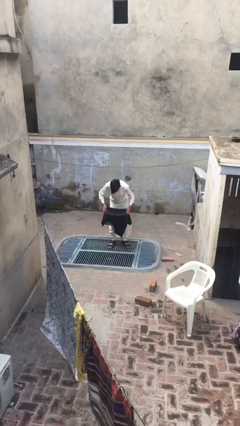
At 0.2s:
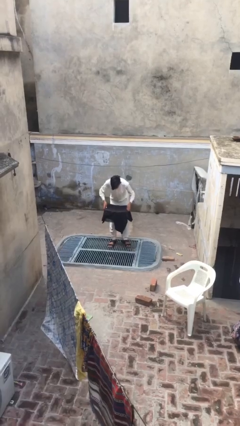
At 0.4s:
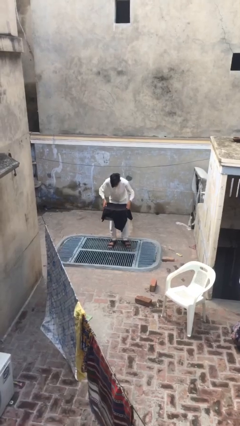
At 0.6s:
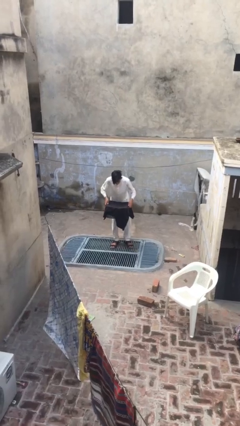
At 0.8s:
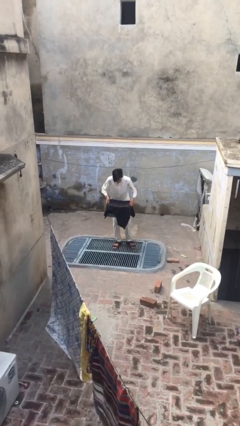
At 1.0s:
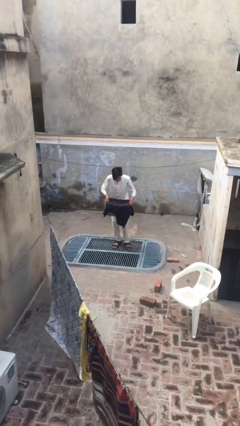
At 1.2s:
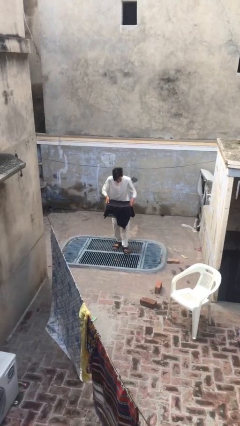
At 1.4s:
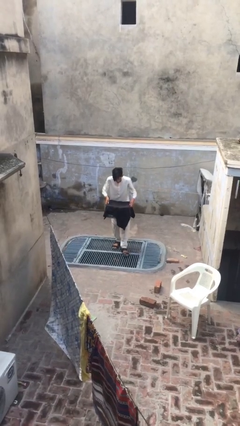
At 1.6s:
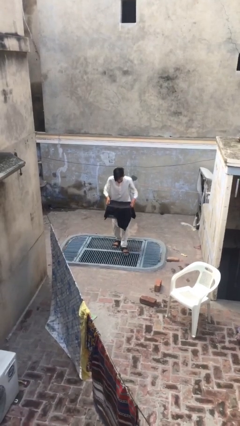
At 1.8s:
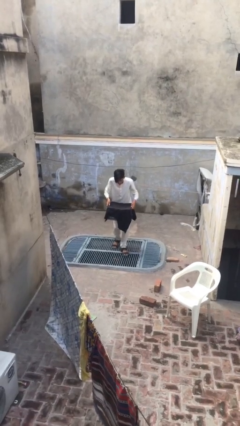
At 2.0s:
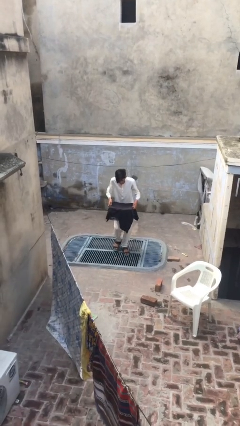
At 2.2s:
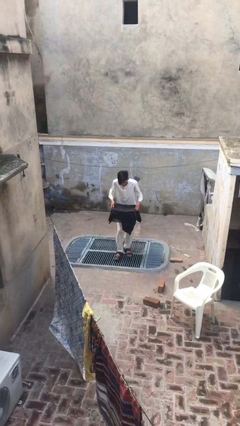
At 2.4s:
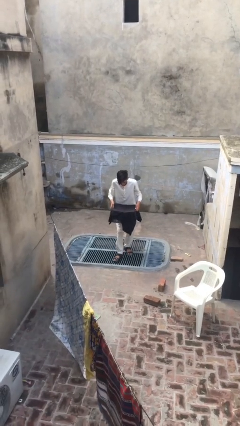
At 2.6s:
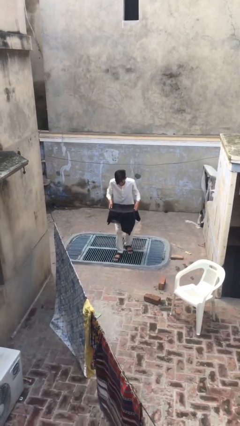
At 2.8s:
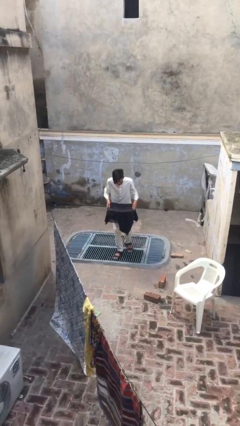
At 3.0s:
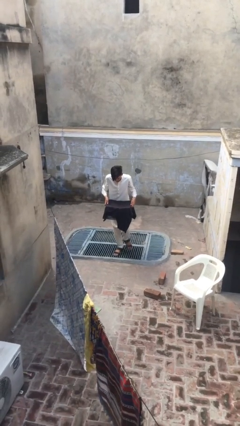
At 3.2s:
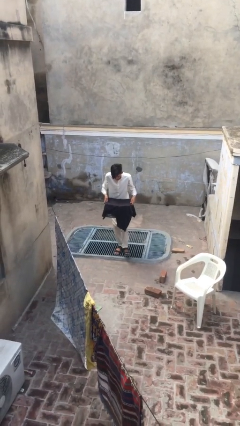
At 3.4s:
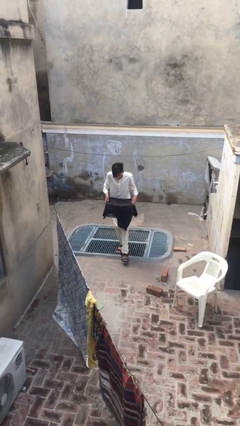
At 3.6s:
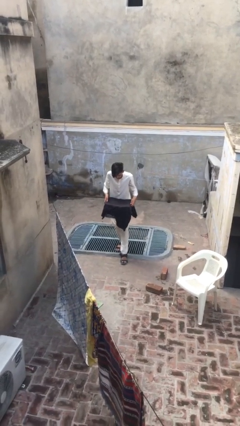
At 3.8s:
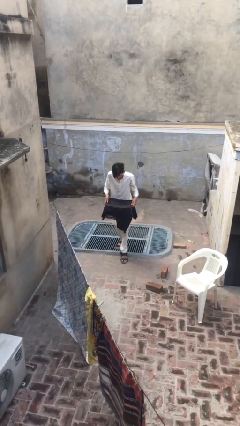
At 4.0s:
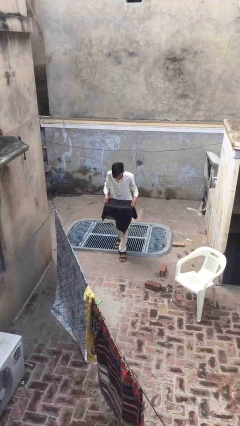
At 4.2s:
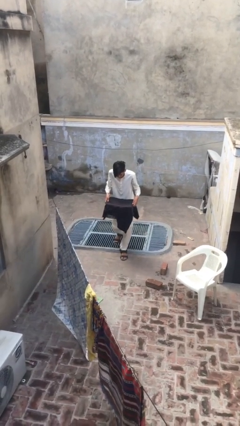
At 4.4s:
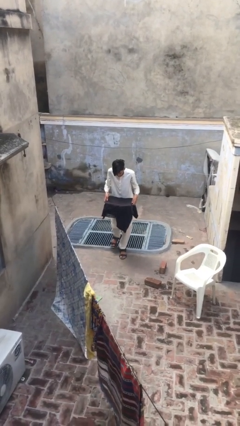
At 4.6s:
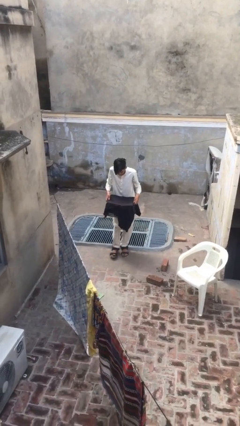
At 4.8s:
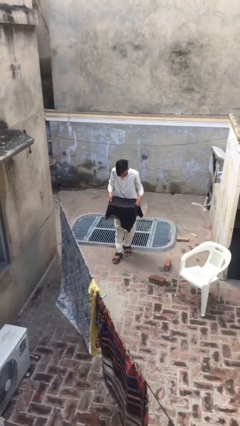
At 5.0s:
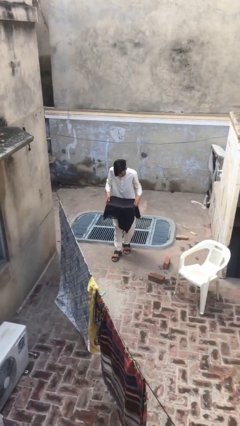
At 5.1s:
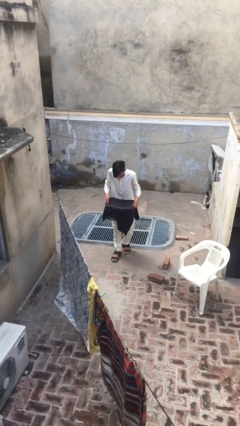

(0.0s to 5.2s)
person carries heavy object

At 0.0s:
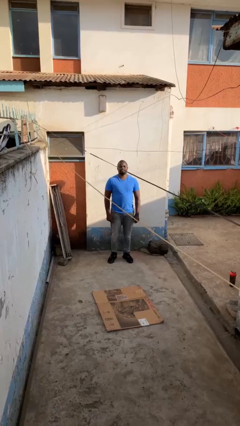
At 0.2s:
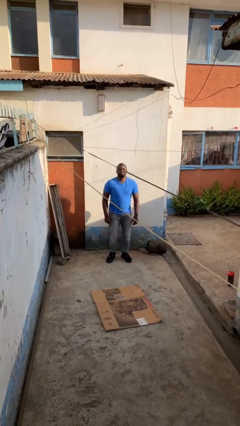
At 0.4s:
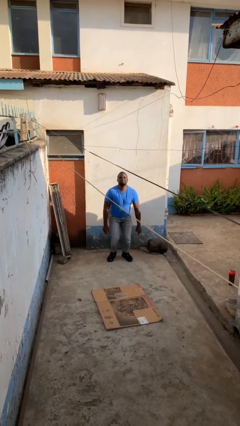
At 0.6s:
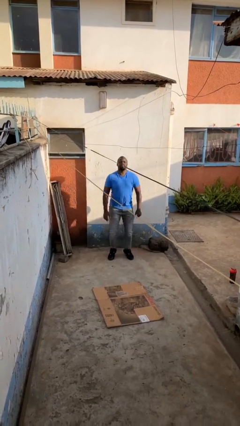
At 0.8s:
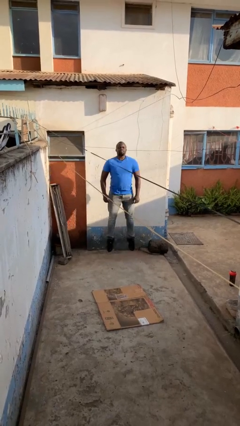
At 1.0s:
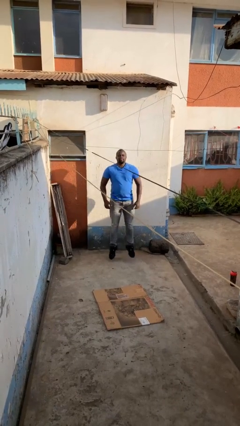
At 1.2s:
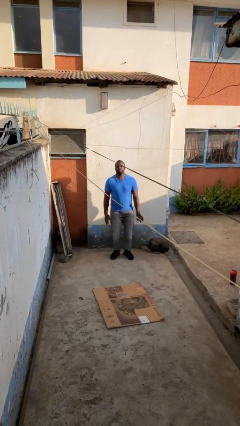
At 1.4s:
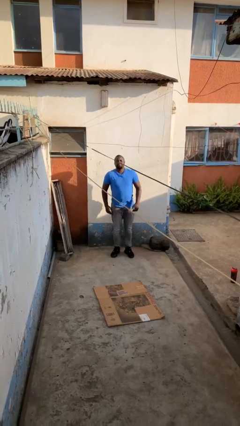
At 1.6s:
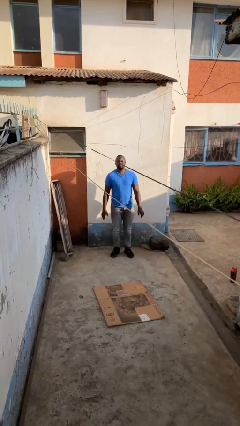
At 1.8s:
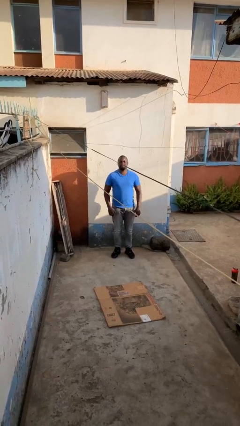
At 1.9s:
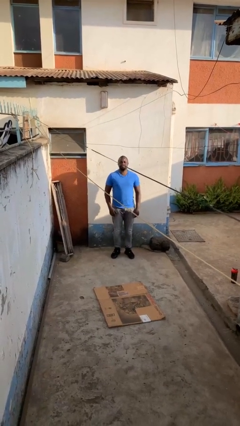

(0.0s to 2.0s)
person jumps

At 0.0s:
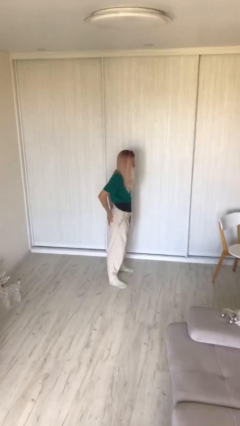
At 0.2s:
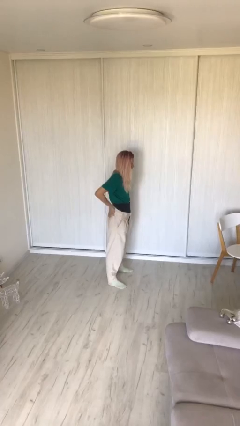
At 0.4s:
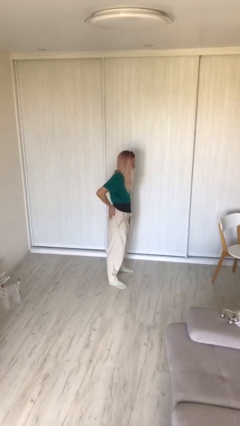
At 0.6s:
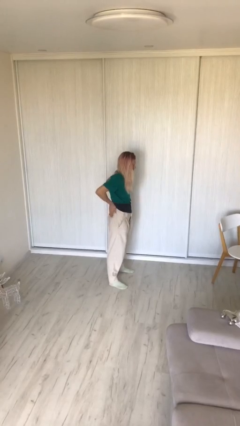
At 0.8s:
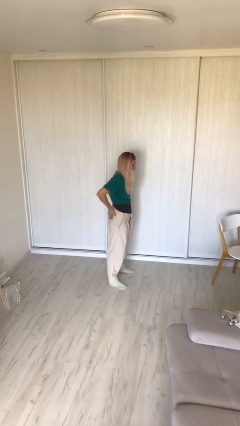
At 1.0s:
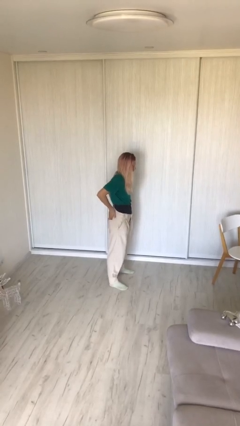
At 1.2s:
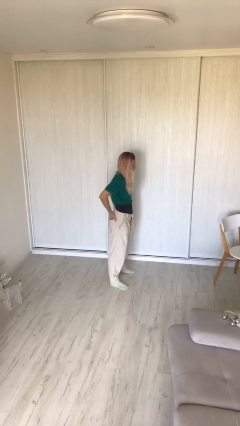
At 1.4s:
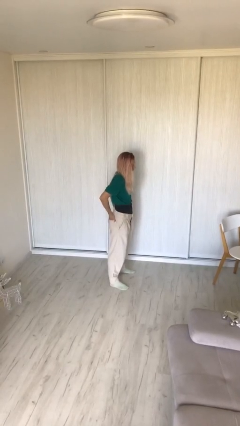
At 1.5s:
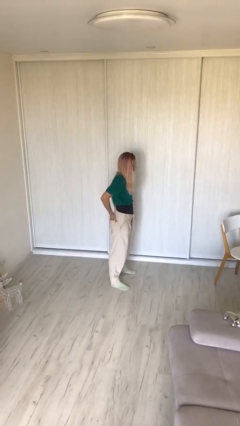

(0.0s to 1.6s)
person puts hands in back pockets

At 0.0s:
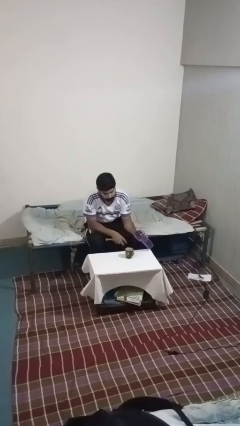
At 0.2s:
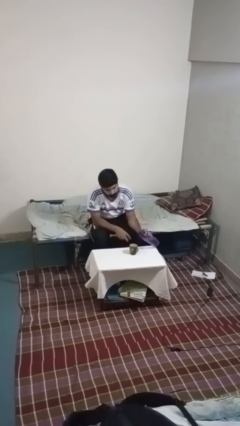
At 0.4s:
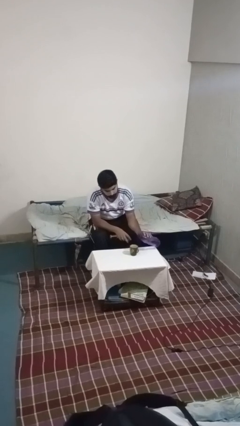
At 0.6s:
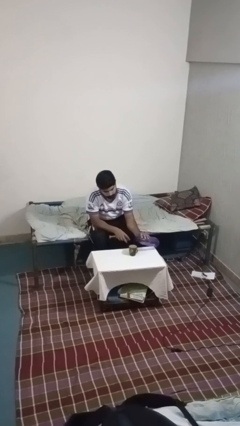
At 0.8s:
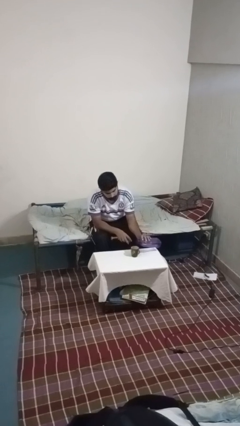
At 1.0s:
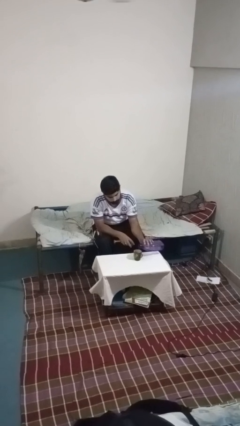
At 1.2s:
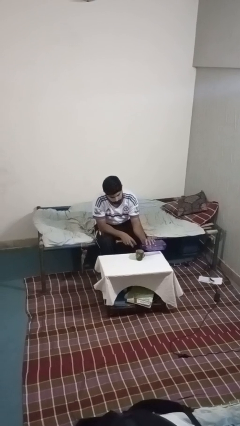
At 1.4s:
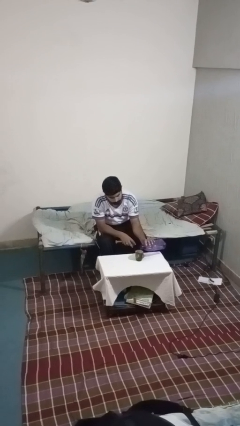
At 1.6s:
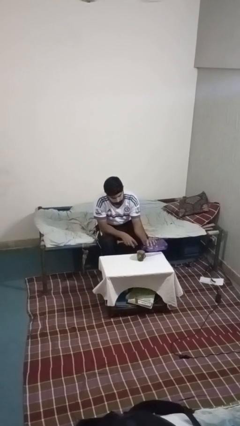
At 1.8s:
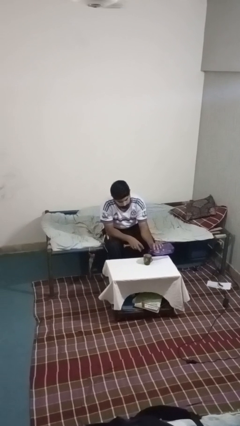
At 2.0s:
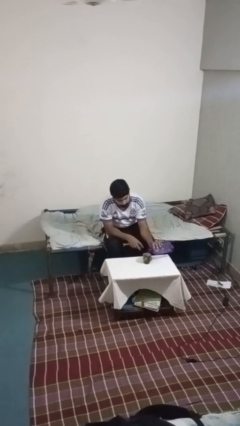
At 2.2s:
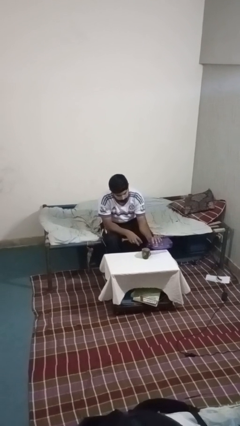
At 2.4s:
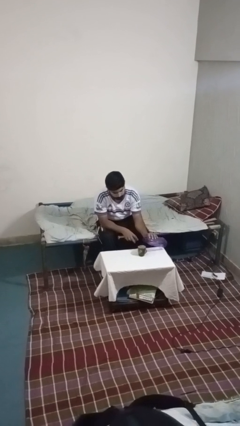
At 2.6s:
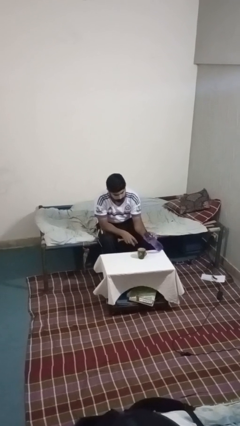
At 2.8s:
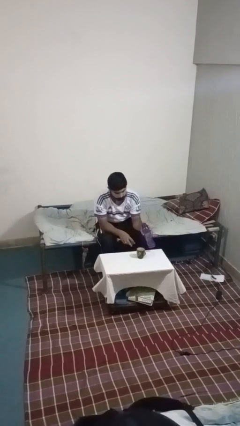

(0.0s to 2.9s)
person pours liquid into cup

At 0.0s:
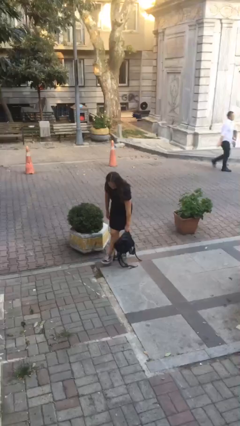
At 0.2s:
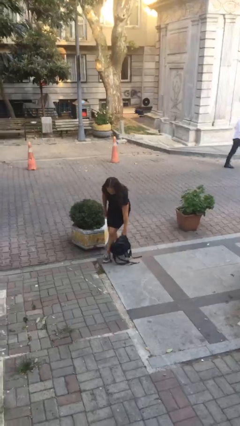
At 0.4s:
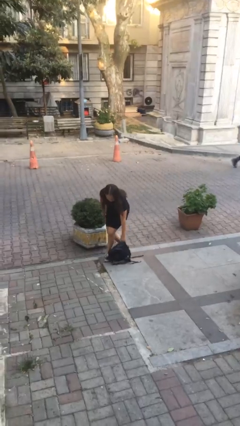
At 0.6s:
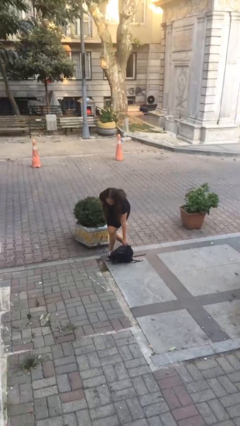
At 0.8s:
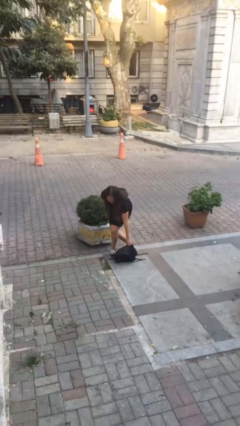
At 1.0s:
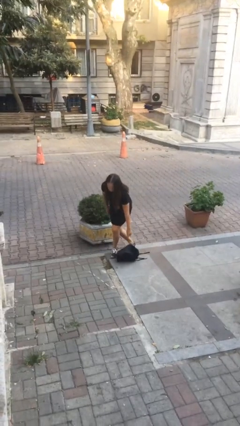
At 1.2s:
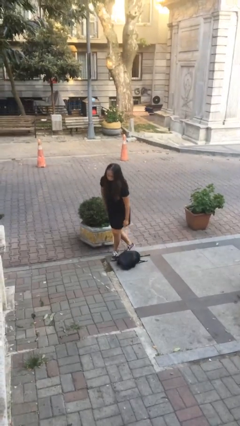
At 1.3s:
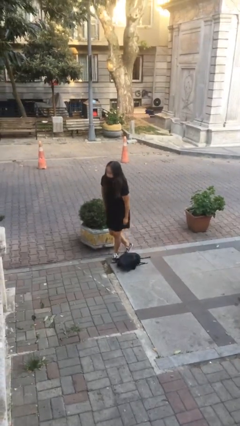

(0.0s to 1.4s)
person puts down object on floor

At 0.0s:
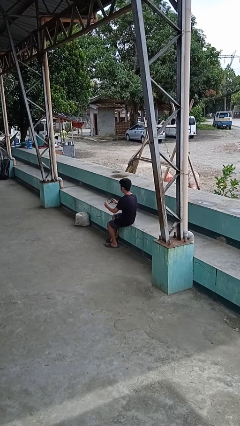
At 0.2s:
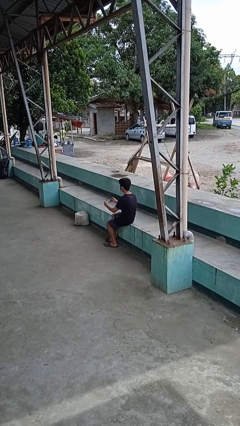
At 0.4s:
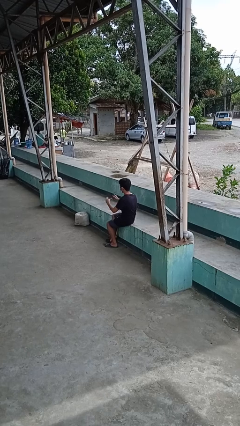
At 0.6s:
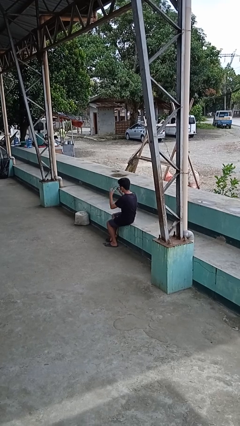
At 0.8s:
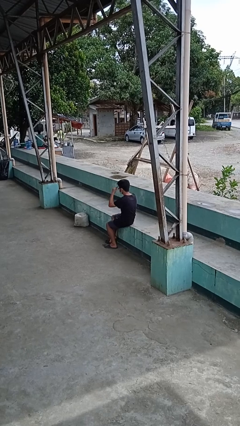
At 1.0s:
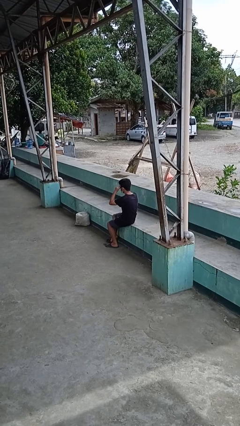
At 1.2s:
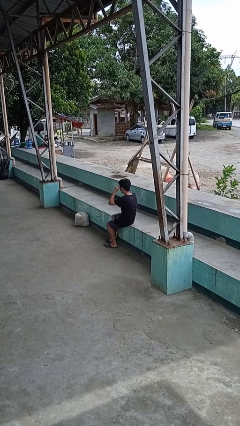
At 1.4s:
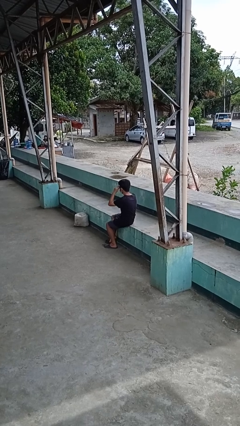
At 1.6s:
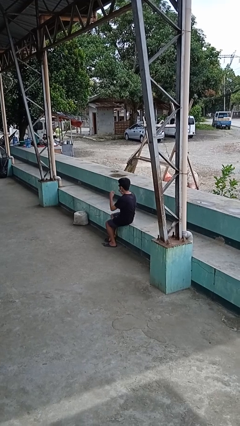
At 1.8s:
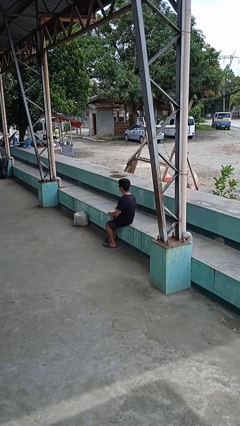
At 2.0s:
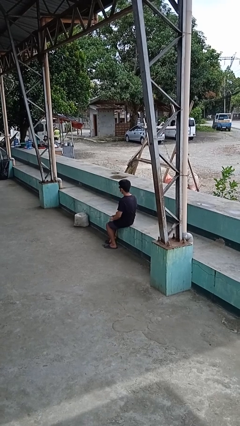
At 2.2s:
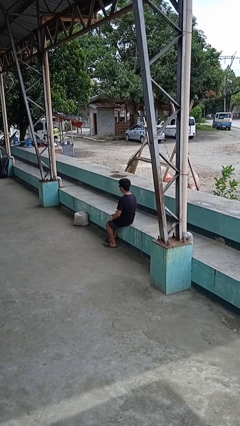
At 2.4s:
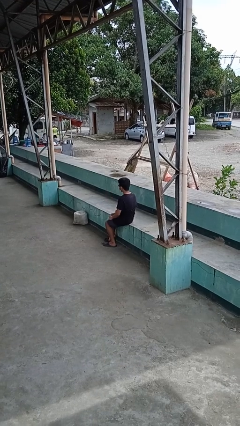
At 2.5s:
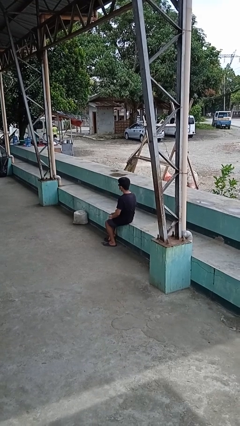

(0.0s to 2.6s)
person puts on sunglasses

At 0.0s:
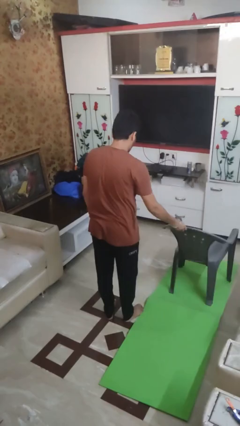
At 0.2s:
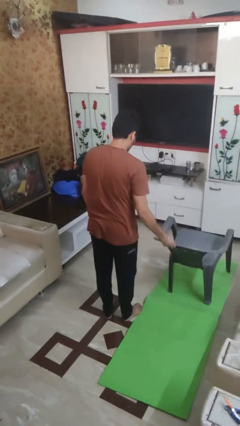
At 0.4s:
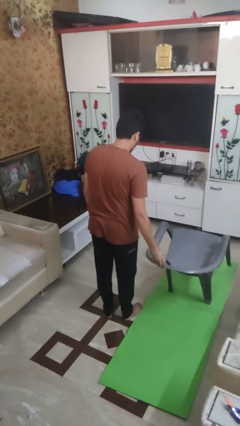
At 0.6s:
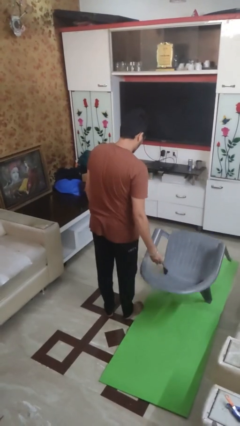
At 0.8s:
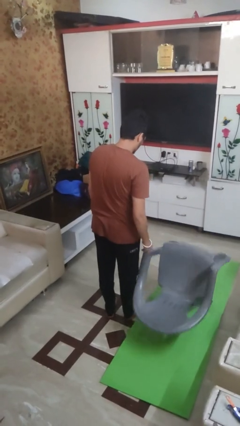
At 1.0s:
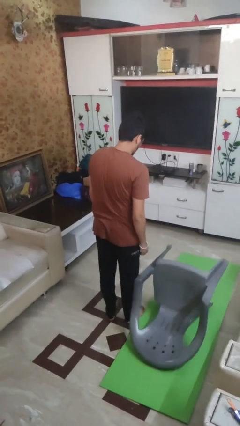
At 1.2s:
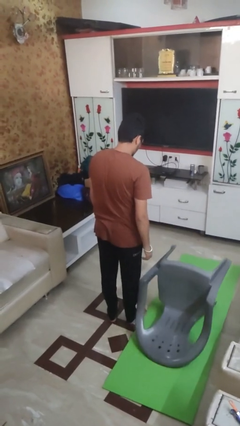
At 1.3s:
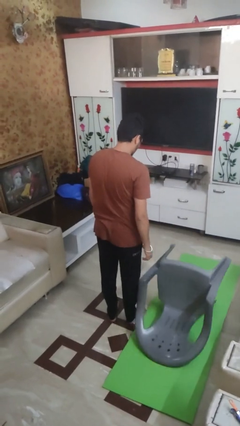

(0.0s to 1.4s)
person knocks over furniture
